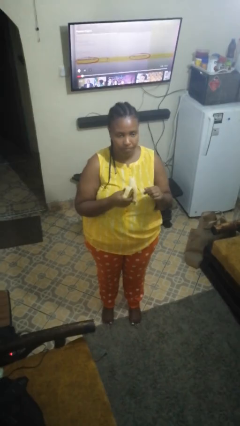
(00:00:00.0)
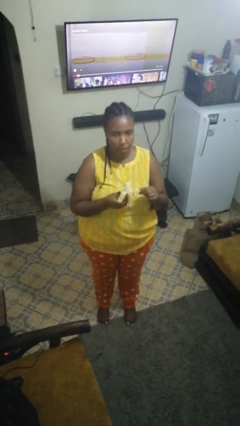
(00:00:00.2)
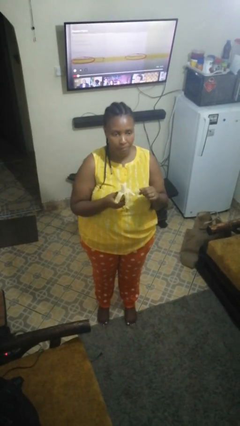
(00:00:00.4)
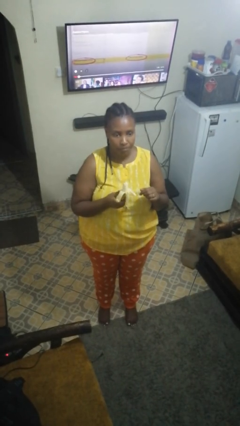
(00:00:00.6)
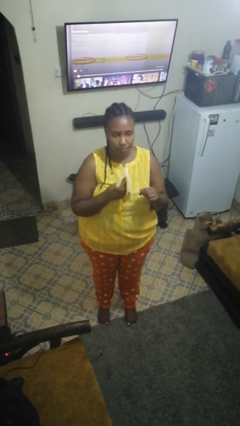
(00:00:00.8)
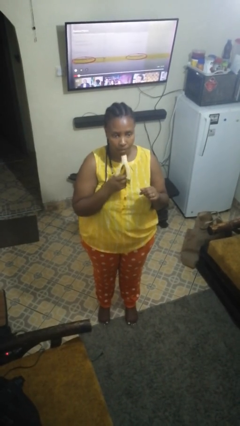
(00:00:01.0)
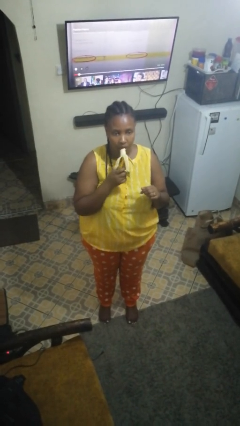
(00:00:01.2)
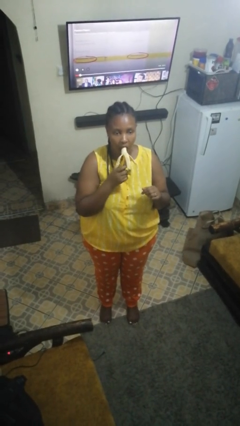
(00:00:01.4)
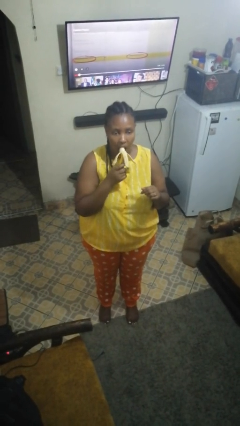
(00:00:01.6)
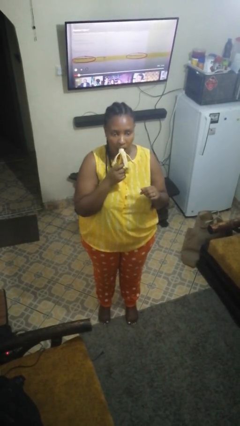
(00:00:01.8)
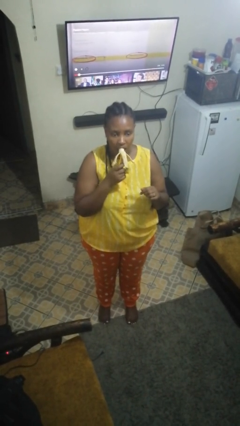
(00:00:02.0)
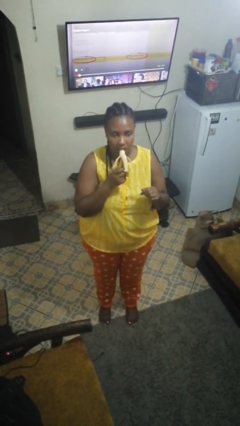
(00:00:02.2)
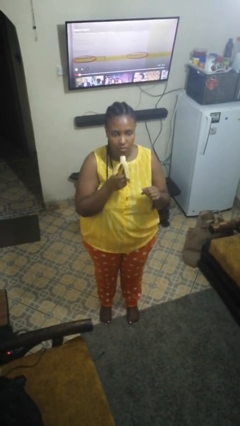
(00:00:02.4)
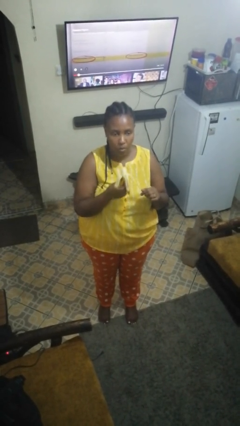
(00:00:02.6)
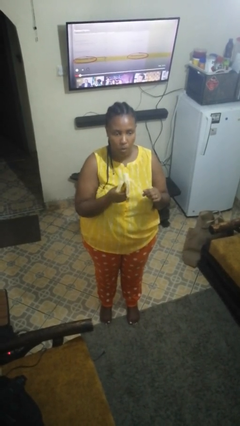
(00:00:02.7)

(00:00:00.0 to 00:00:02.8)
person eats banana

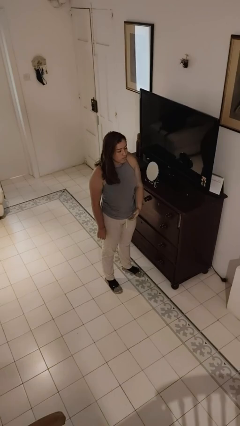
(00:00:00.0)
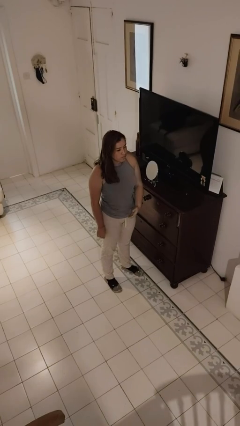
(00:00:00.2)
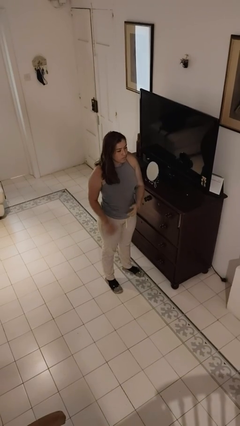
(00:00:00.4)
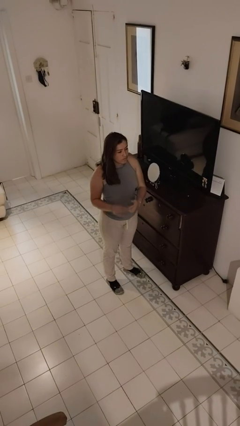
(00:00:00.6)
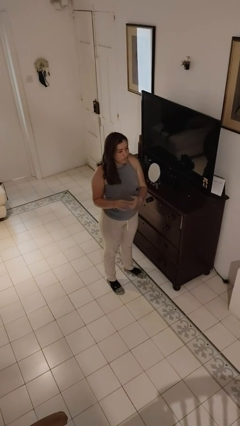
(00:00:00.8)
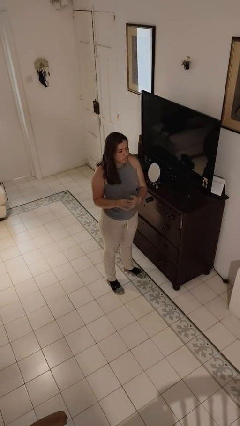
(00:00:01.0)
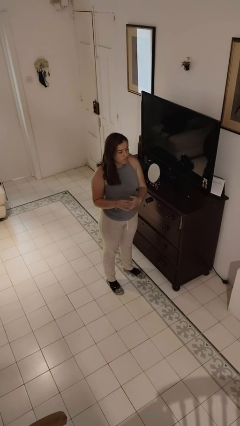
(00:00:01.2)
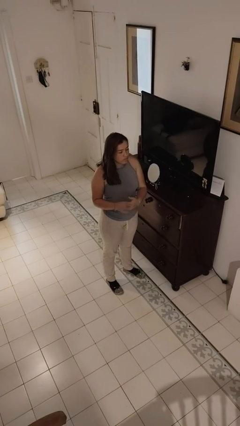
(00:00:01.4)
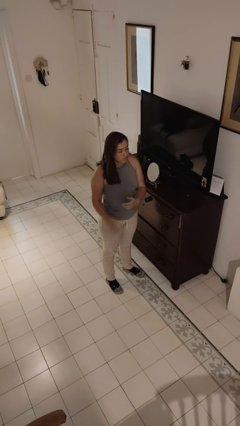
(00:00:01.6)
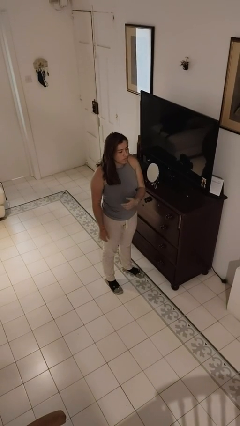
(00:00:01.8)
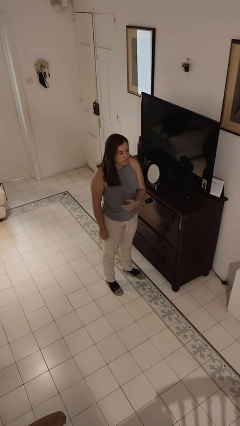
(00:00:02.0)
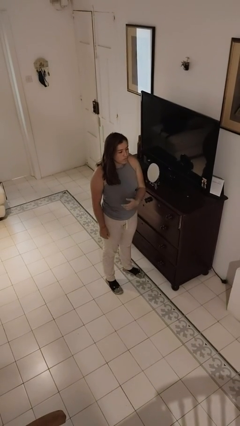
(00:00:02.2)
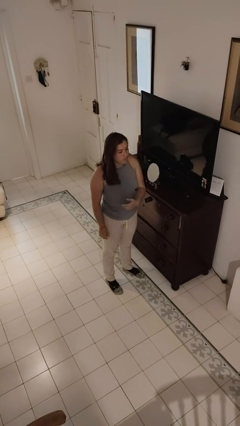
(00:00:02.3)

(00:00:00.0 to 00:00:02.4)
person puts on ring

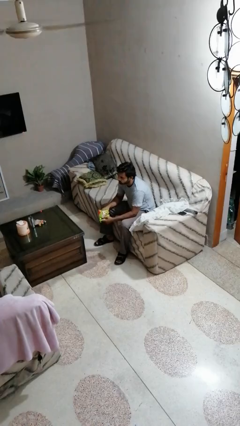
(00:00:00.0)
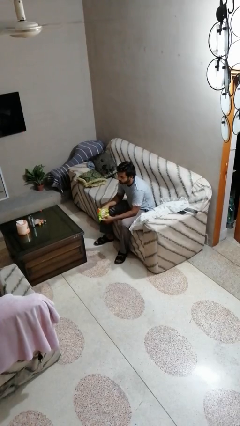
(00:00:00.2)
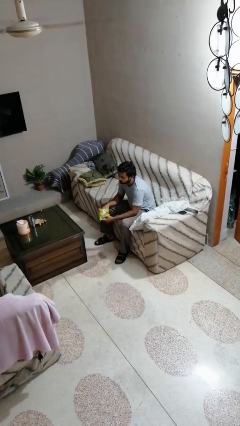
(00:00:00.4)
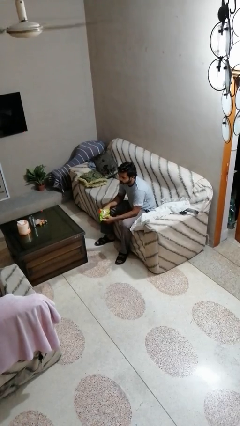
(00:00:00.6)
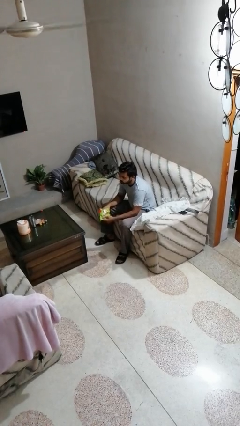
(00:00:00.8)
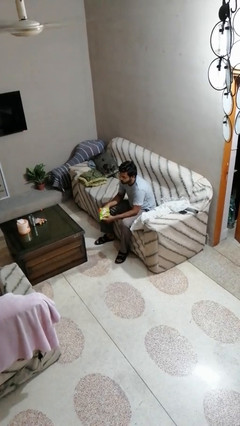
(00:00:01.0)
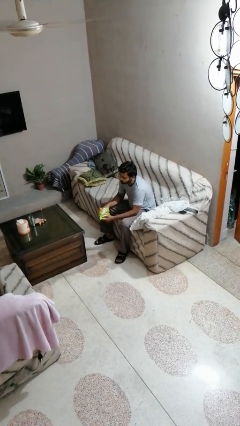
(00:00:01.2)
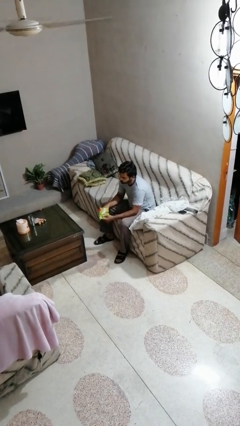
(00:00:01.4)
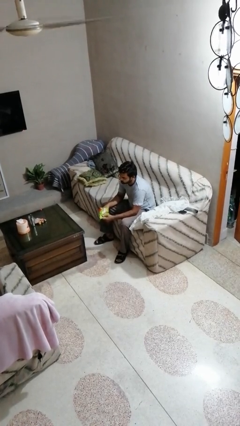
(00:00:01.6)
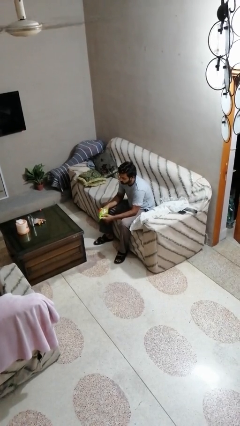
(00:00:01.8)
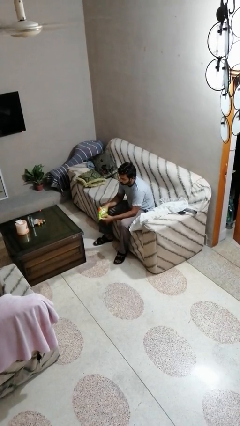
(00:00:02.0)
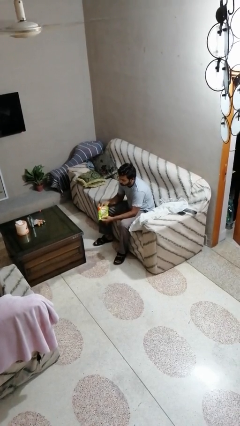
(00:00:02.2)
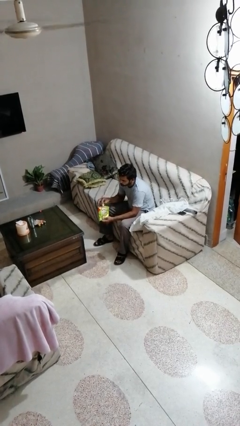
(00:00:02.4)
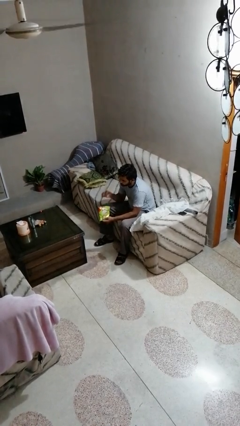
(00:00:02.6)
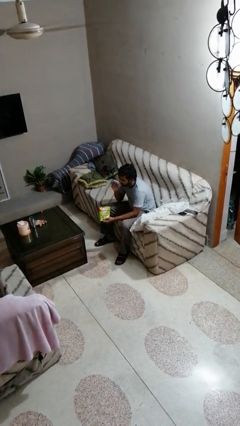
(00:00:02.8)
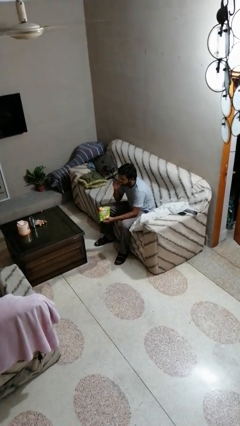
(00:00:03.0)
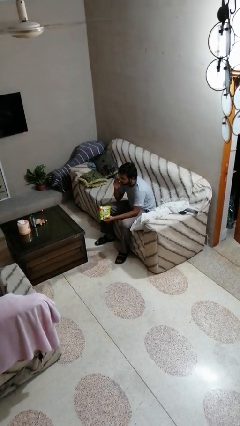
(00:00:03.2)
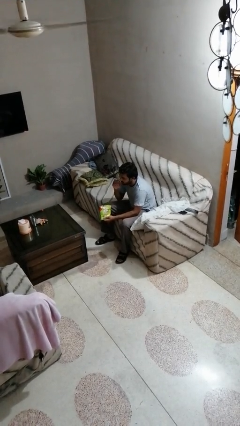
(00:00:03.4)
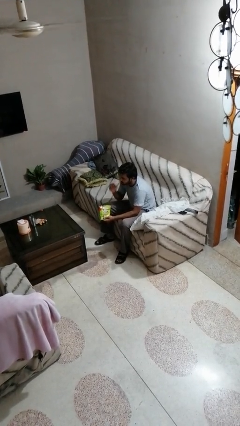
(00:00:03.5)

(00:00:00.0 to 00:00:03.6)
person eats snack from bag

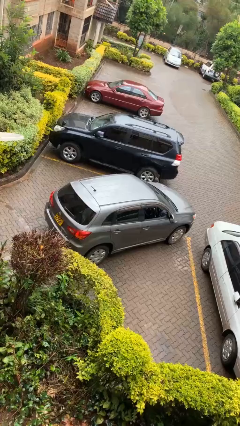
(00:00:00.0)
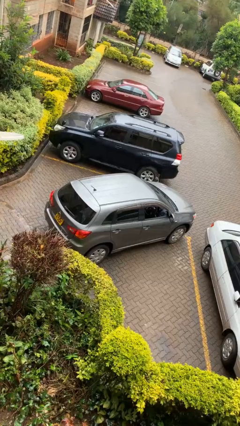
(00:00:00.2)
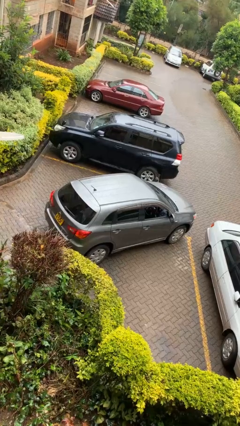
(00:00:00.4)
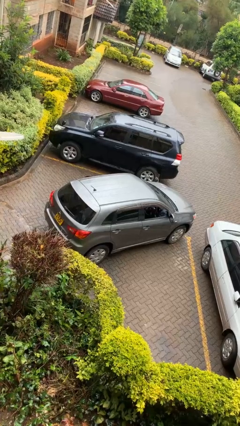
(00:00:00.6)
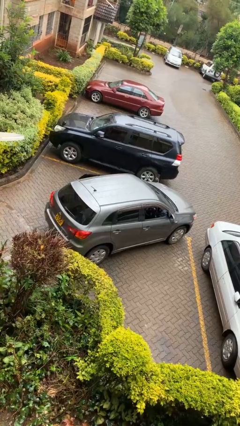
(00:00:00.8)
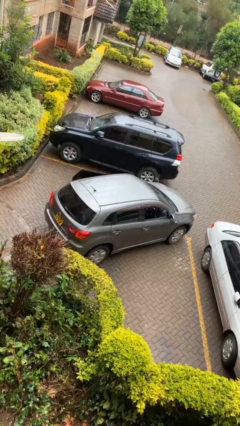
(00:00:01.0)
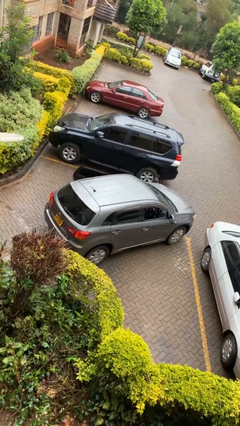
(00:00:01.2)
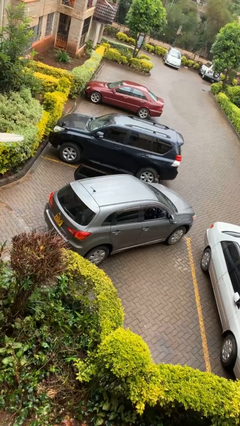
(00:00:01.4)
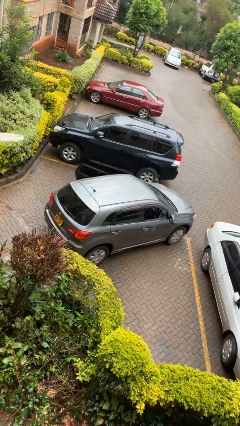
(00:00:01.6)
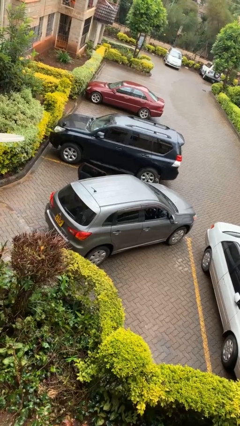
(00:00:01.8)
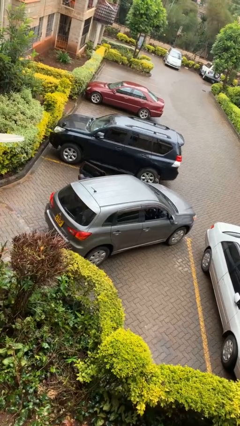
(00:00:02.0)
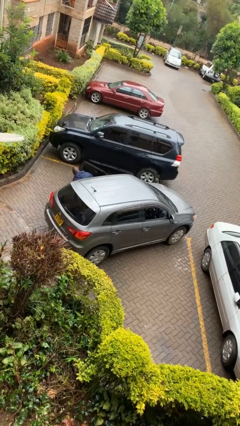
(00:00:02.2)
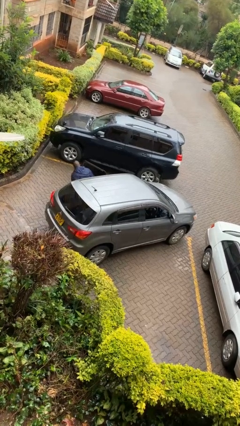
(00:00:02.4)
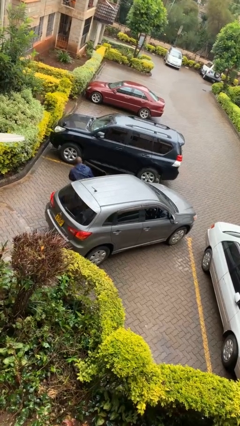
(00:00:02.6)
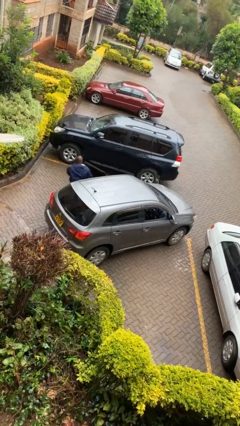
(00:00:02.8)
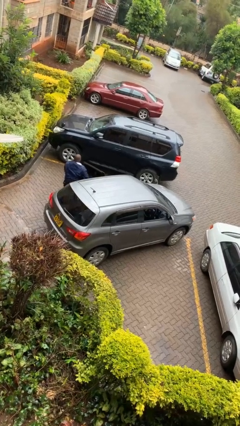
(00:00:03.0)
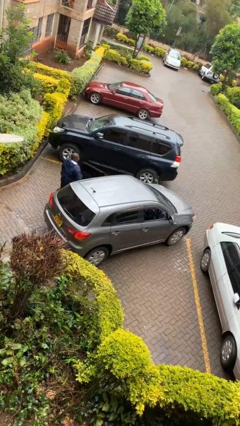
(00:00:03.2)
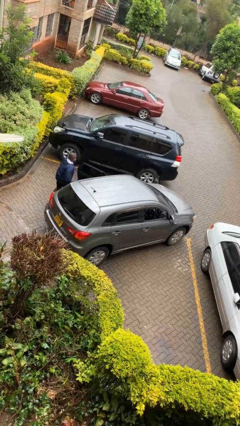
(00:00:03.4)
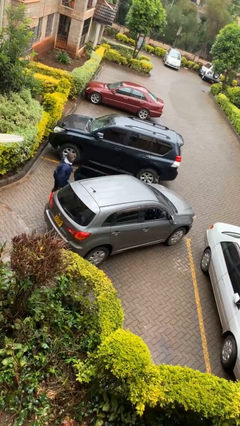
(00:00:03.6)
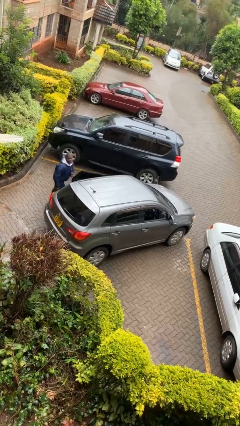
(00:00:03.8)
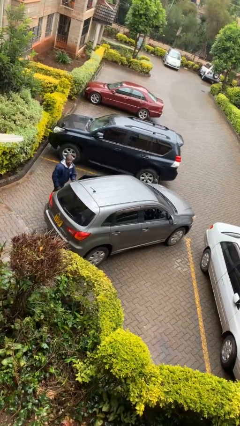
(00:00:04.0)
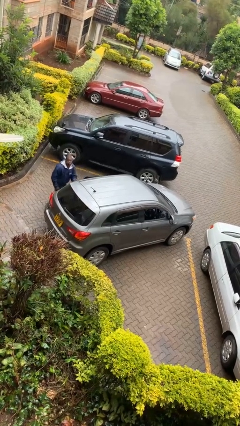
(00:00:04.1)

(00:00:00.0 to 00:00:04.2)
car drops off person

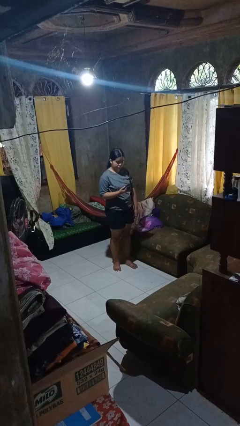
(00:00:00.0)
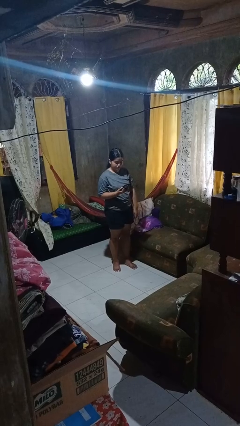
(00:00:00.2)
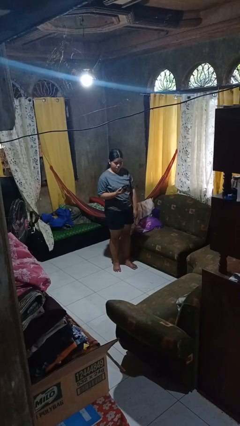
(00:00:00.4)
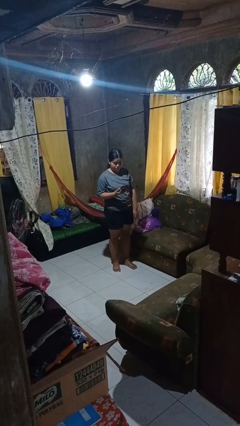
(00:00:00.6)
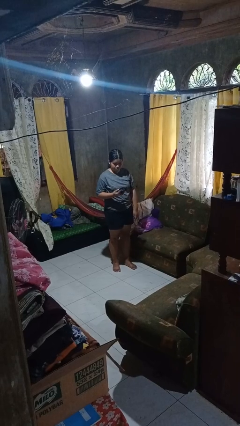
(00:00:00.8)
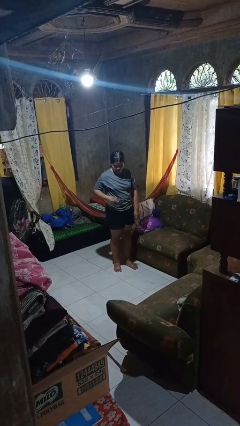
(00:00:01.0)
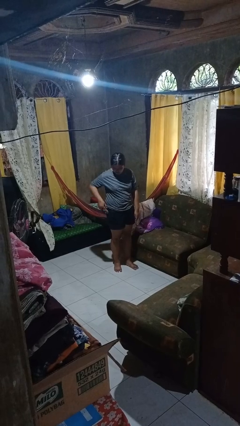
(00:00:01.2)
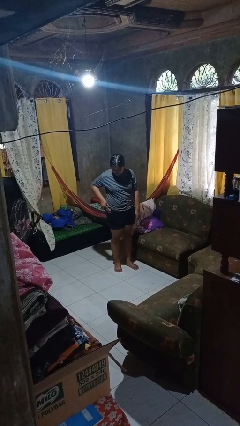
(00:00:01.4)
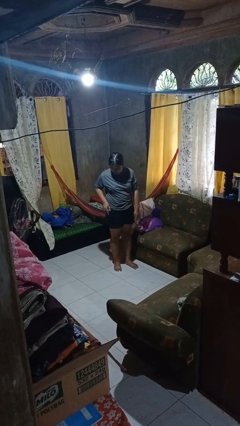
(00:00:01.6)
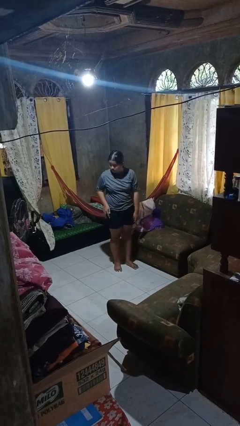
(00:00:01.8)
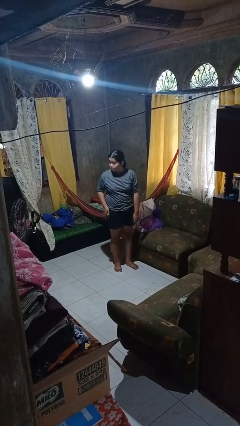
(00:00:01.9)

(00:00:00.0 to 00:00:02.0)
person puts phone into pocket

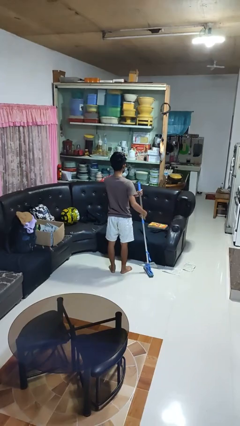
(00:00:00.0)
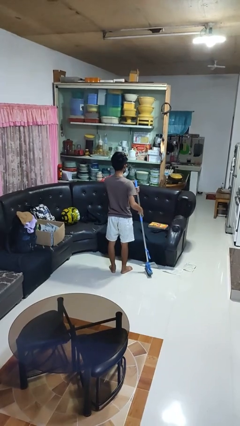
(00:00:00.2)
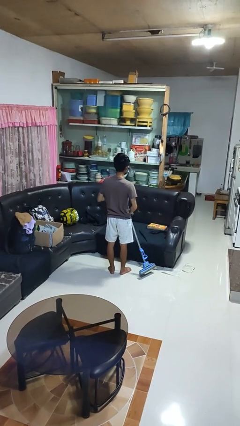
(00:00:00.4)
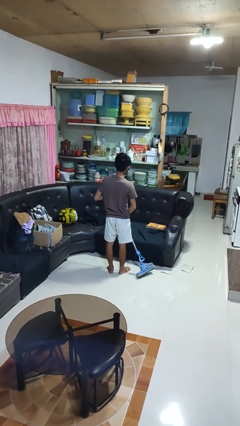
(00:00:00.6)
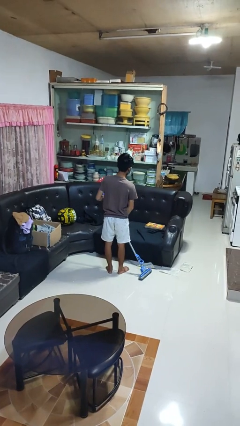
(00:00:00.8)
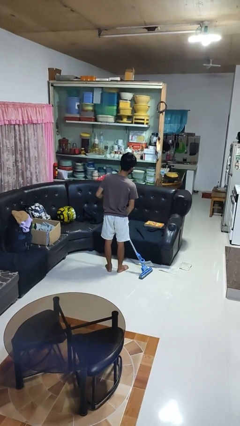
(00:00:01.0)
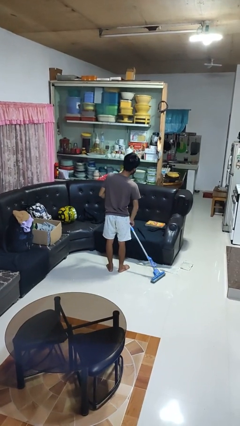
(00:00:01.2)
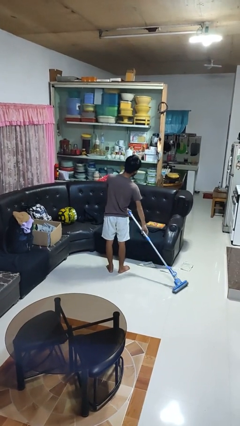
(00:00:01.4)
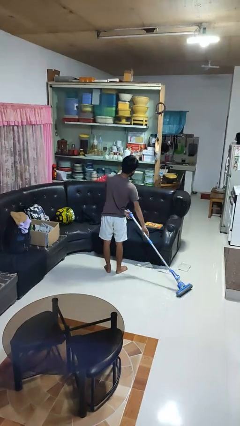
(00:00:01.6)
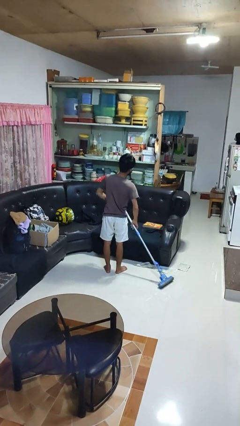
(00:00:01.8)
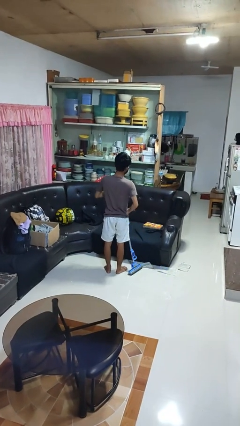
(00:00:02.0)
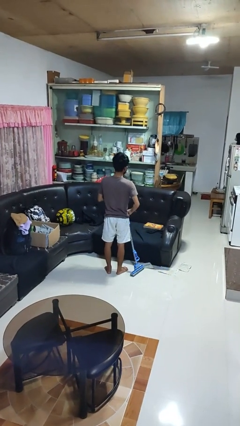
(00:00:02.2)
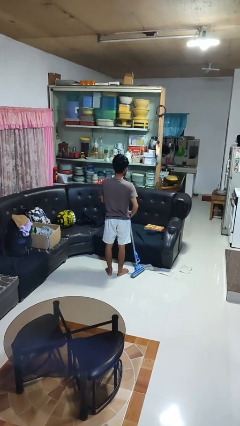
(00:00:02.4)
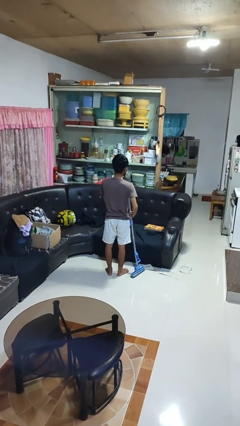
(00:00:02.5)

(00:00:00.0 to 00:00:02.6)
person mops
